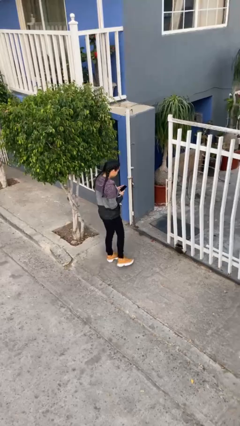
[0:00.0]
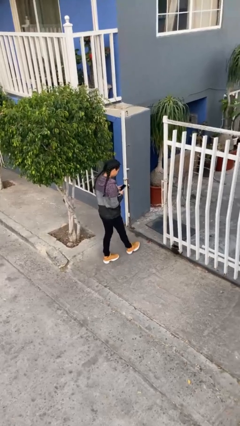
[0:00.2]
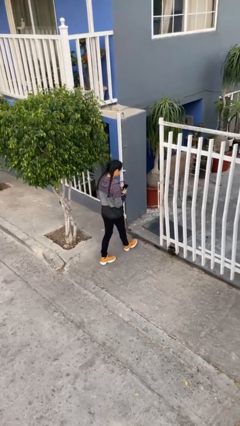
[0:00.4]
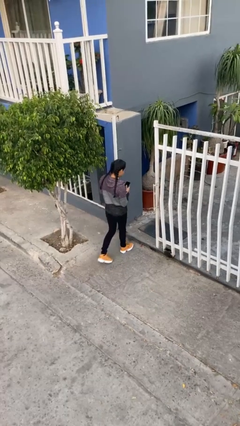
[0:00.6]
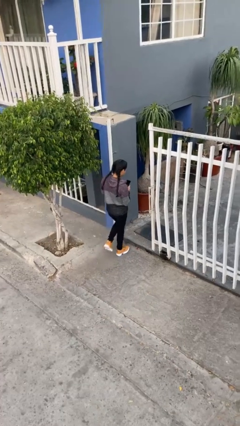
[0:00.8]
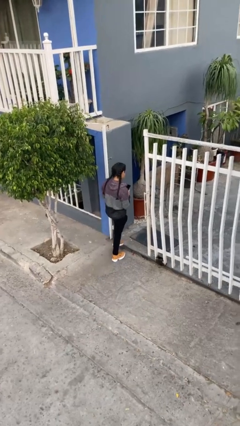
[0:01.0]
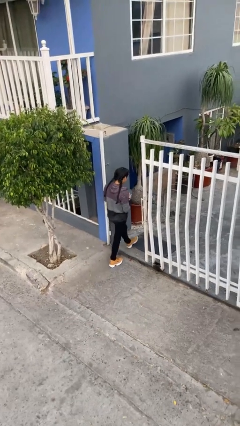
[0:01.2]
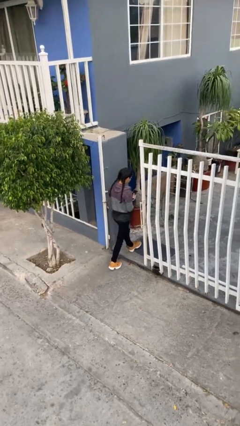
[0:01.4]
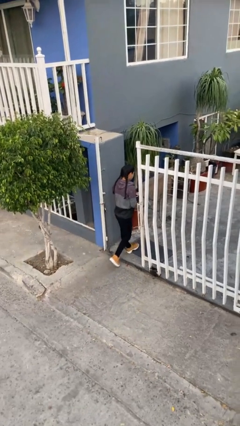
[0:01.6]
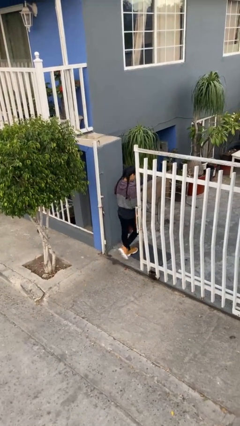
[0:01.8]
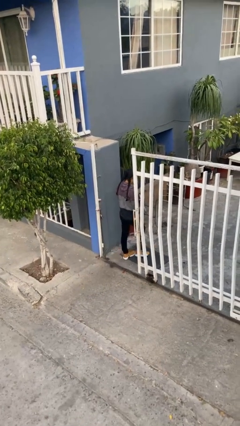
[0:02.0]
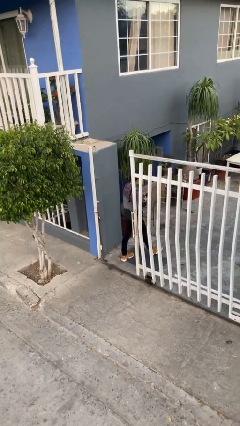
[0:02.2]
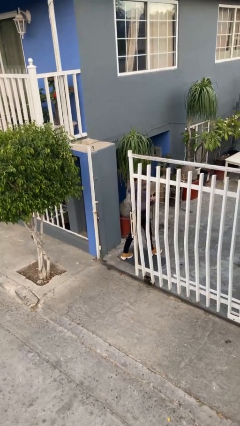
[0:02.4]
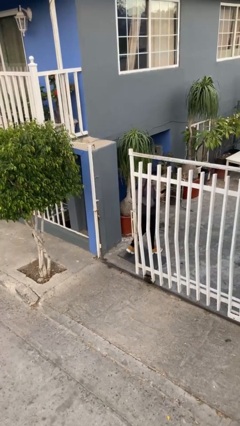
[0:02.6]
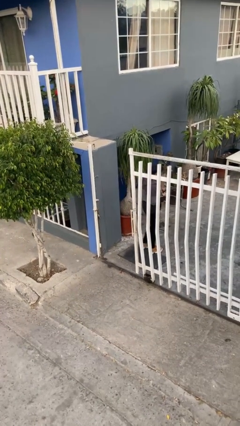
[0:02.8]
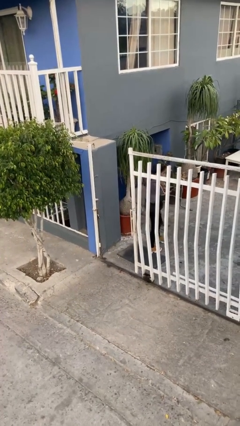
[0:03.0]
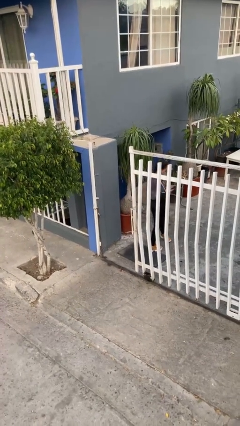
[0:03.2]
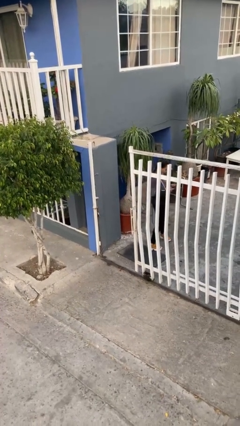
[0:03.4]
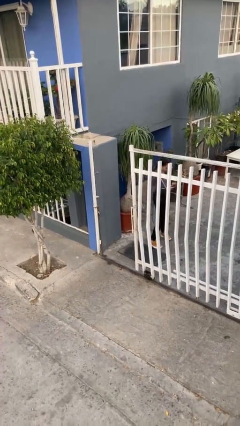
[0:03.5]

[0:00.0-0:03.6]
person exits scene through structure

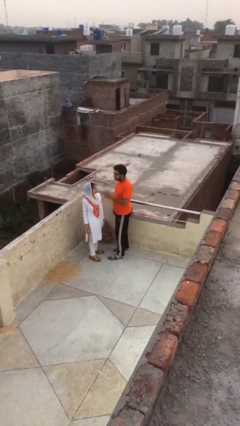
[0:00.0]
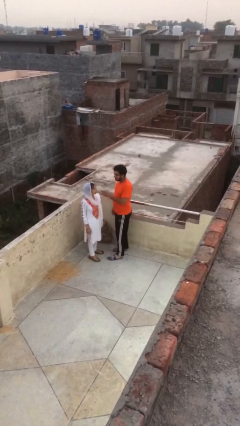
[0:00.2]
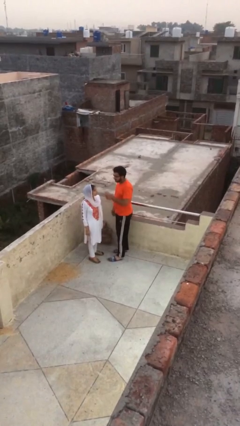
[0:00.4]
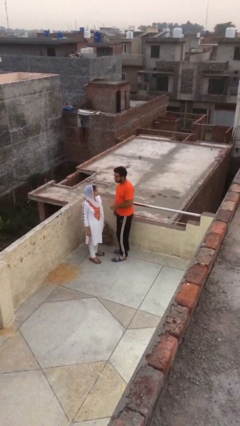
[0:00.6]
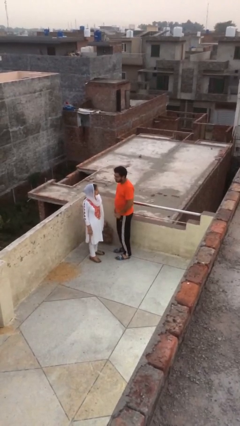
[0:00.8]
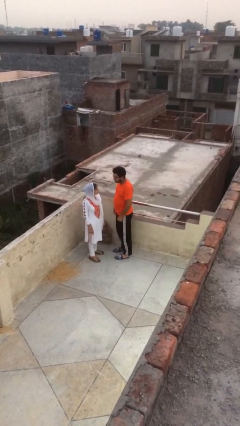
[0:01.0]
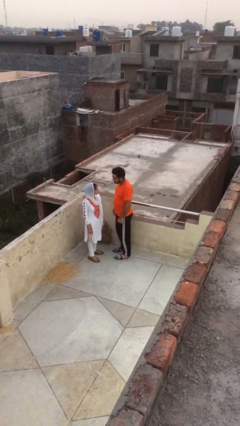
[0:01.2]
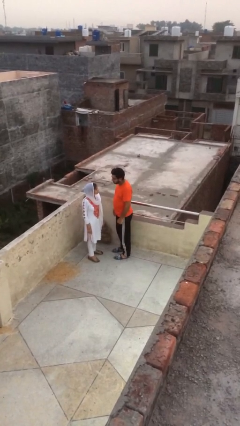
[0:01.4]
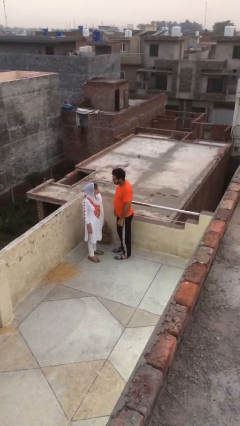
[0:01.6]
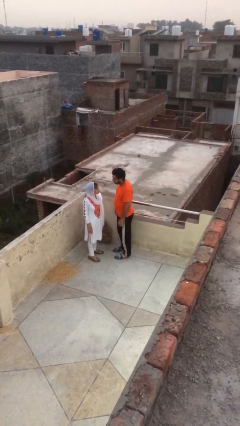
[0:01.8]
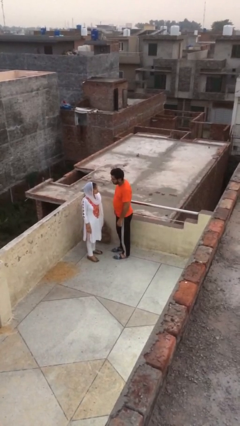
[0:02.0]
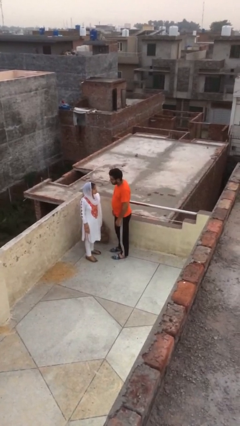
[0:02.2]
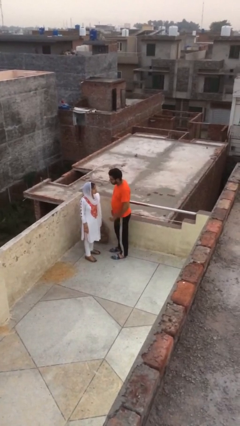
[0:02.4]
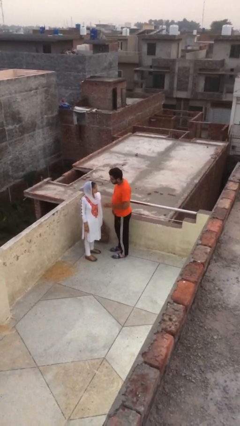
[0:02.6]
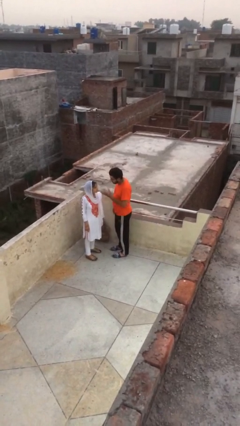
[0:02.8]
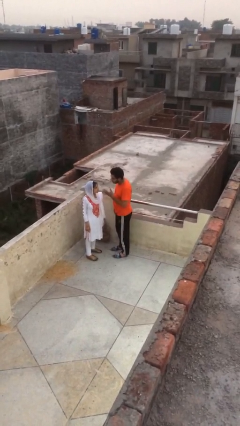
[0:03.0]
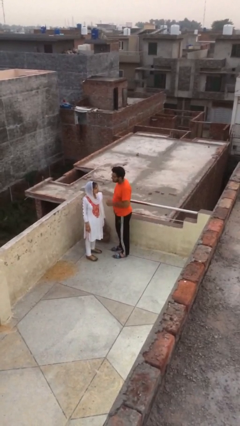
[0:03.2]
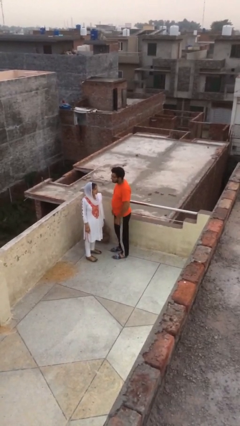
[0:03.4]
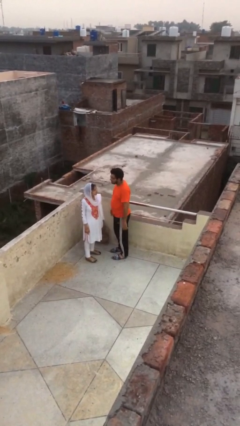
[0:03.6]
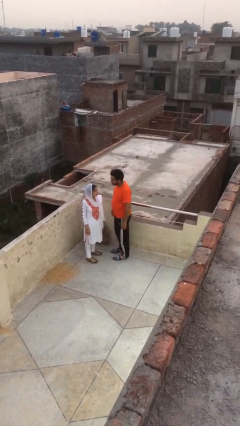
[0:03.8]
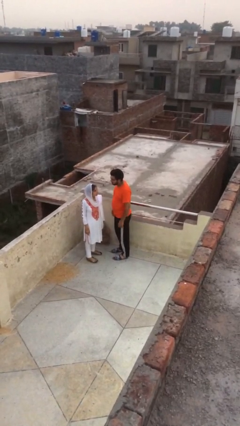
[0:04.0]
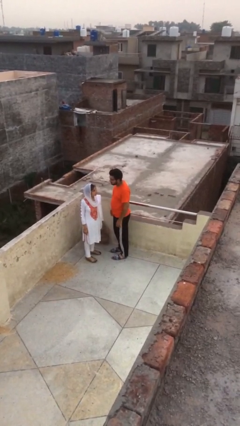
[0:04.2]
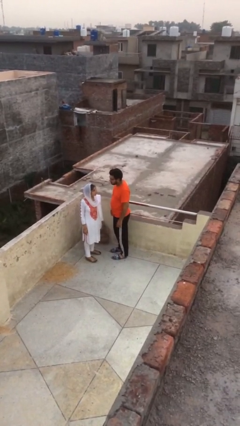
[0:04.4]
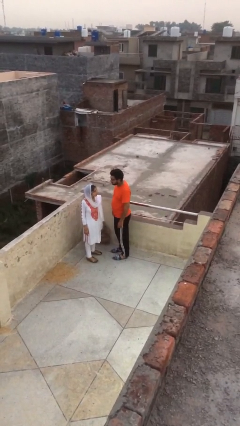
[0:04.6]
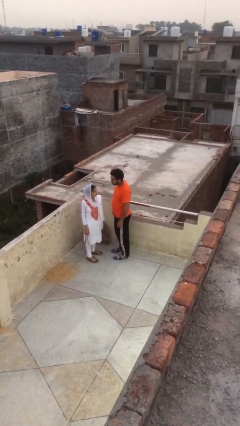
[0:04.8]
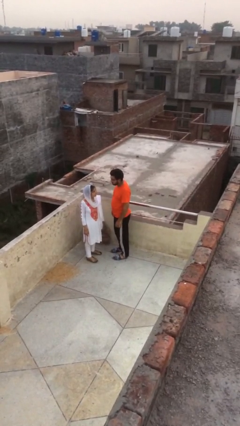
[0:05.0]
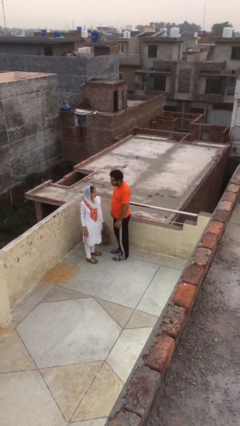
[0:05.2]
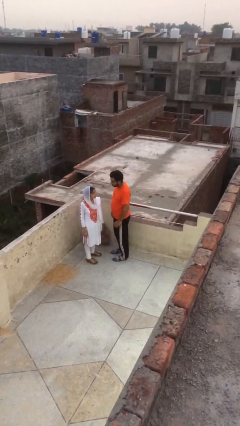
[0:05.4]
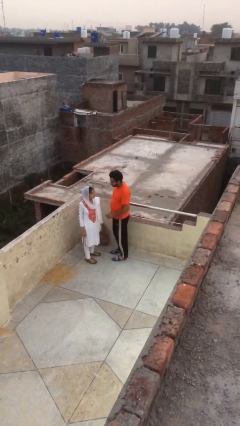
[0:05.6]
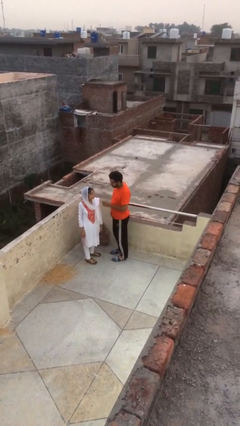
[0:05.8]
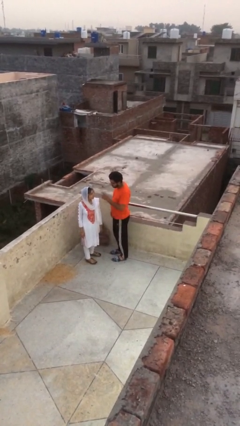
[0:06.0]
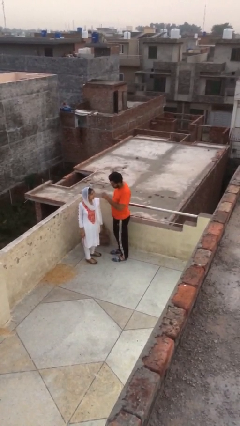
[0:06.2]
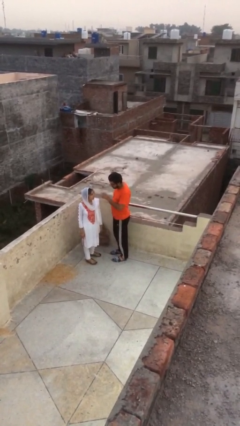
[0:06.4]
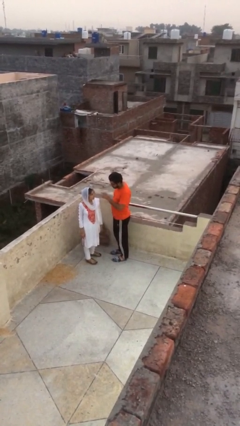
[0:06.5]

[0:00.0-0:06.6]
person talks to person

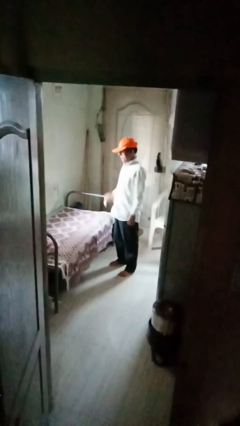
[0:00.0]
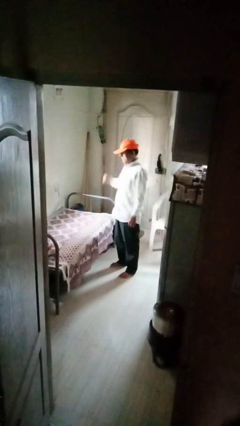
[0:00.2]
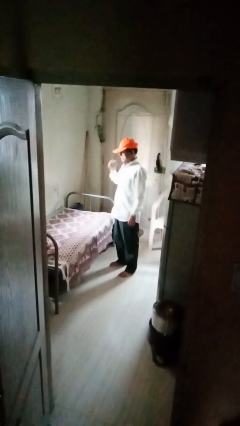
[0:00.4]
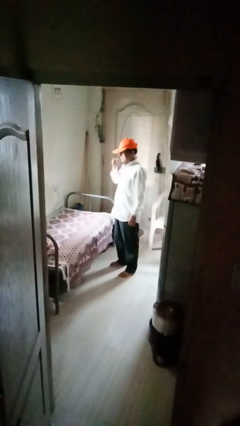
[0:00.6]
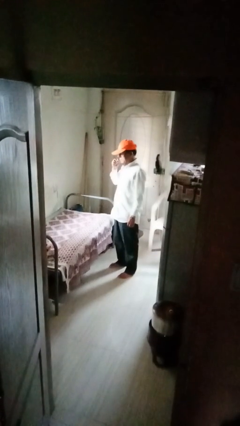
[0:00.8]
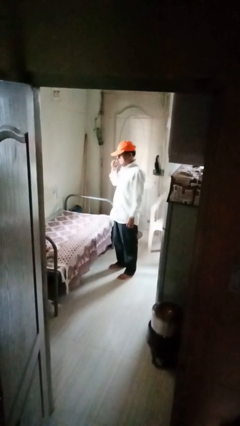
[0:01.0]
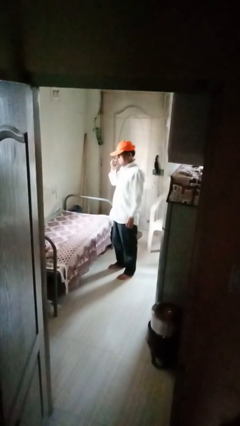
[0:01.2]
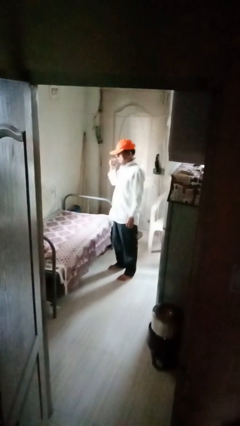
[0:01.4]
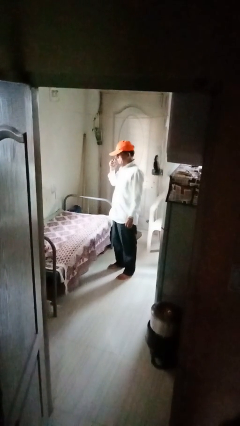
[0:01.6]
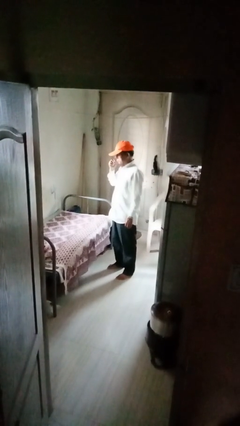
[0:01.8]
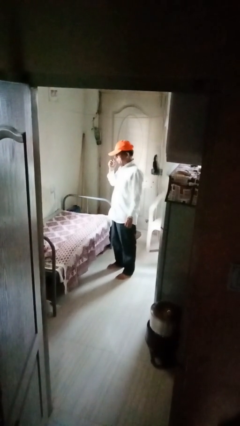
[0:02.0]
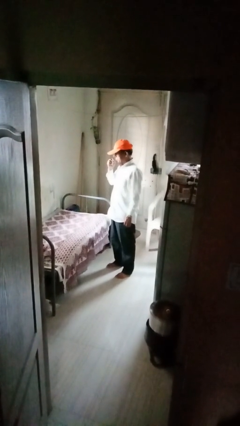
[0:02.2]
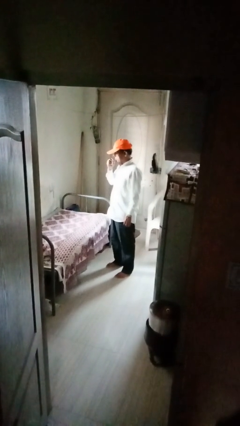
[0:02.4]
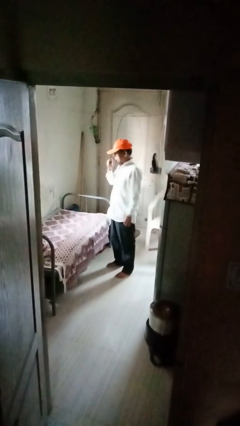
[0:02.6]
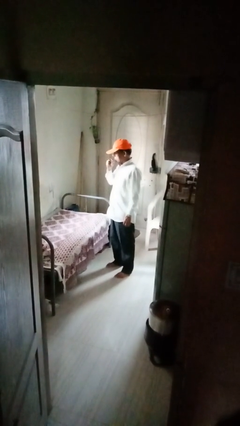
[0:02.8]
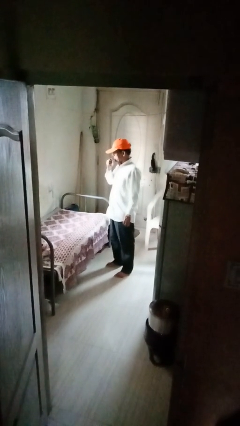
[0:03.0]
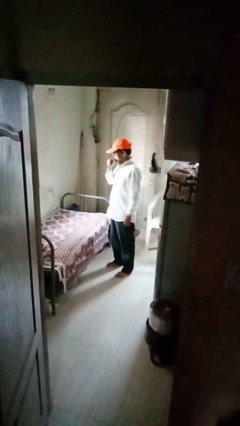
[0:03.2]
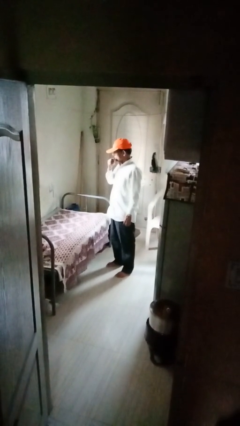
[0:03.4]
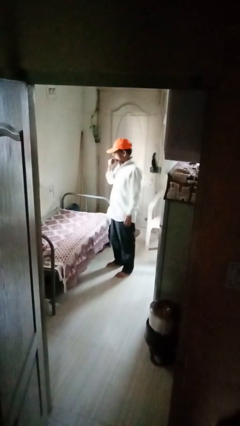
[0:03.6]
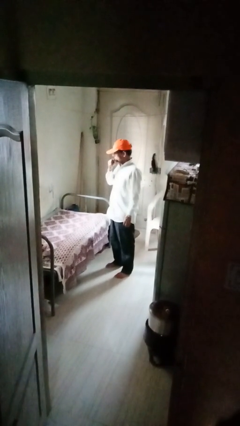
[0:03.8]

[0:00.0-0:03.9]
person flosses

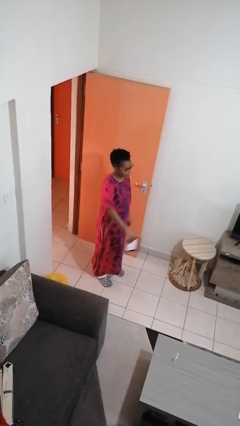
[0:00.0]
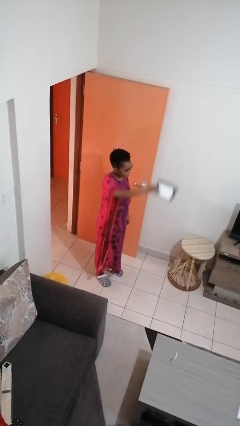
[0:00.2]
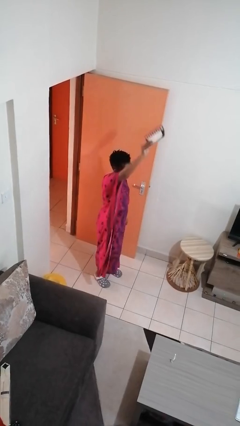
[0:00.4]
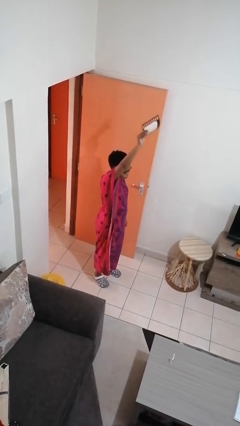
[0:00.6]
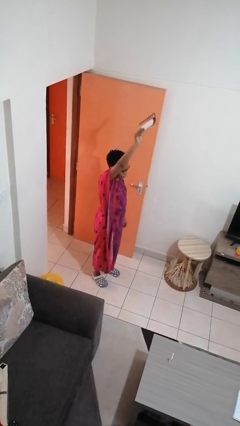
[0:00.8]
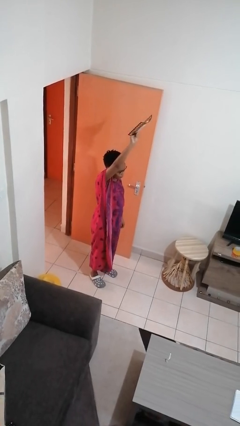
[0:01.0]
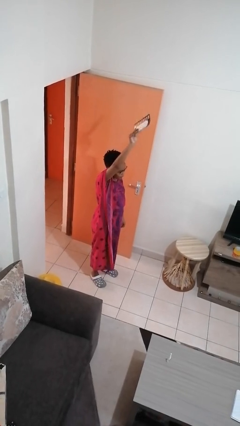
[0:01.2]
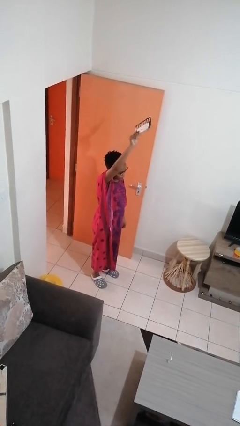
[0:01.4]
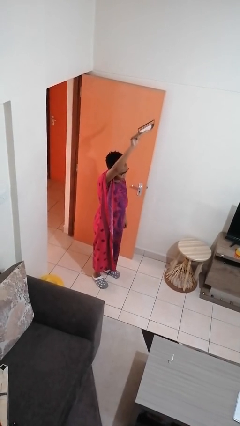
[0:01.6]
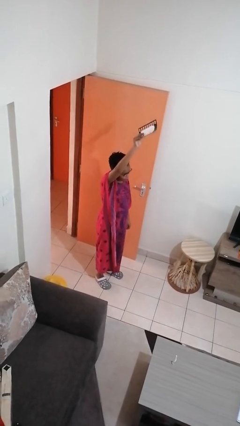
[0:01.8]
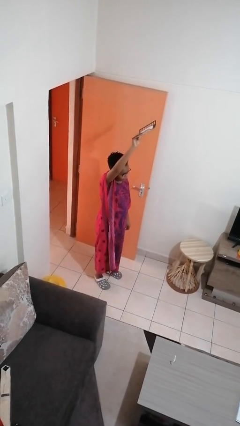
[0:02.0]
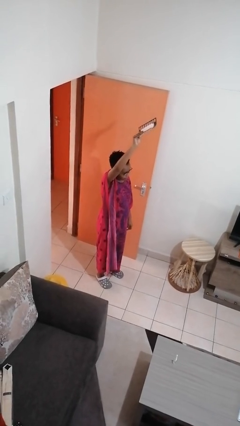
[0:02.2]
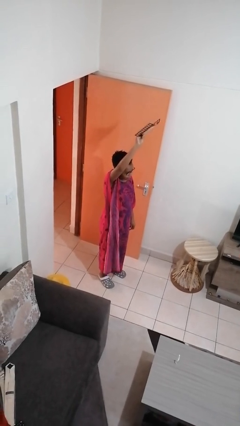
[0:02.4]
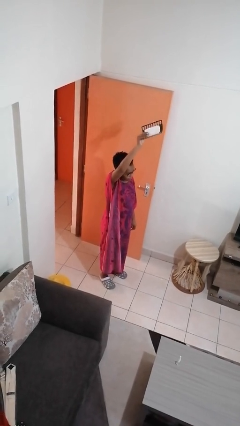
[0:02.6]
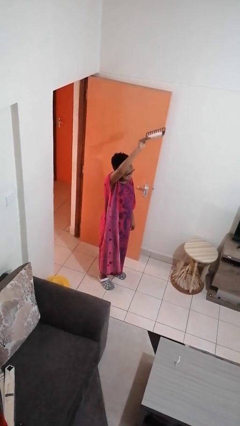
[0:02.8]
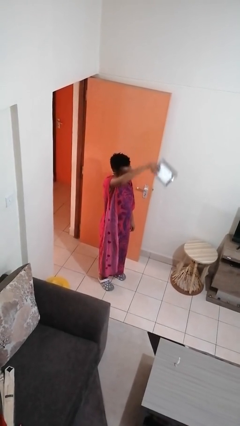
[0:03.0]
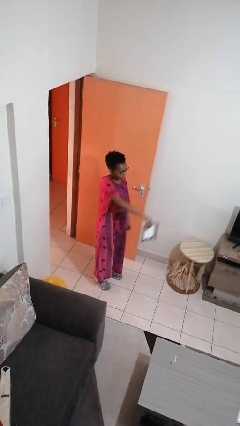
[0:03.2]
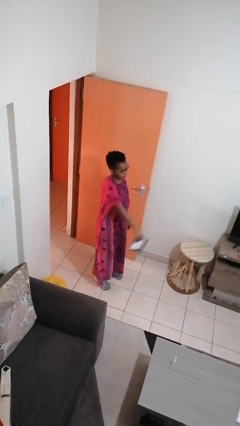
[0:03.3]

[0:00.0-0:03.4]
person holds object above head

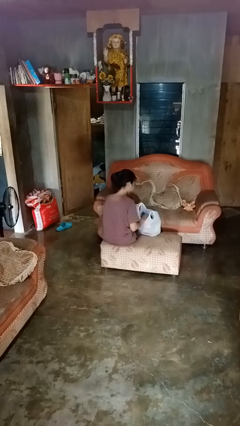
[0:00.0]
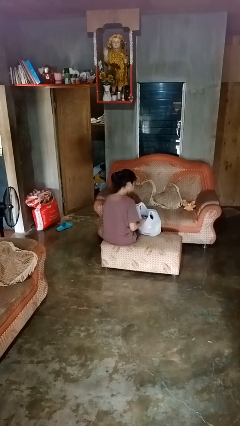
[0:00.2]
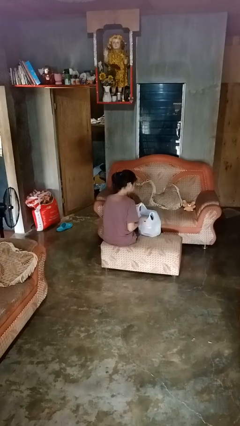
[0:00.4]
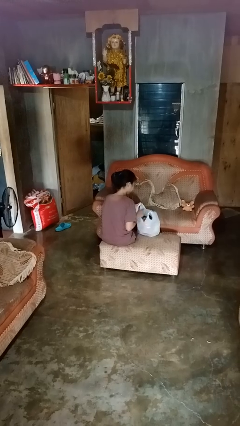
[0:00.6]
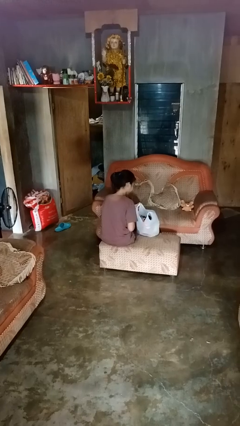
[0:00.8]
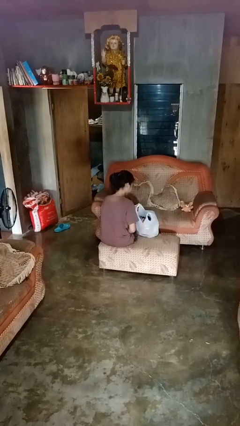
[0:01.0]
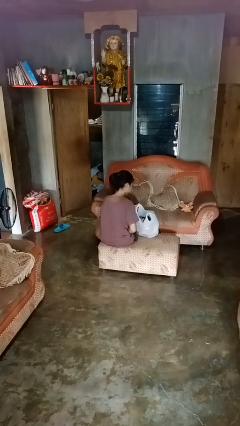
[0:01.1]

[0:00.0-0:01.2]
person puts object into bag
